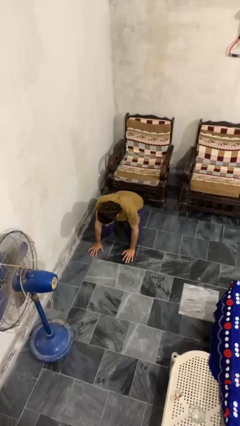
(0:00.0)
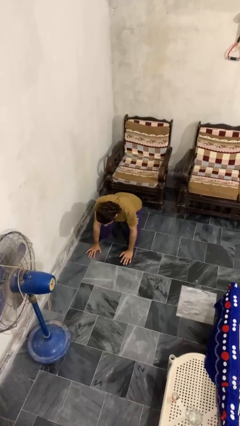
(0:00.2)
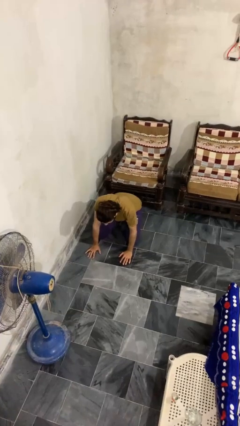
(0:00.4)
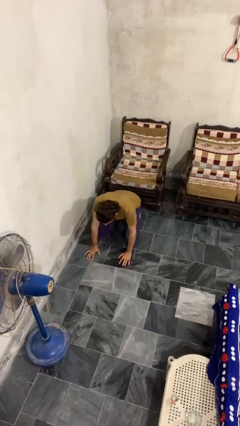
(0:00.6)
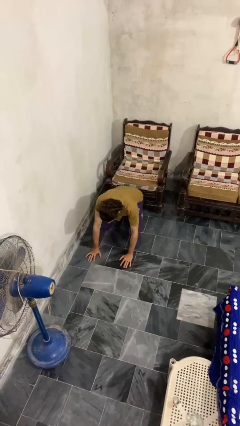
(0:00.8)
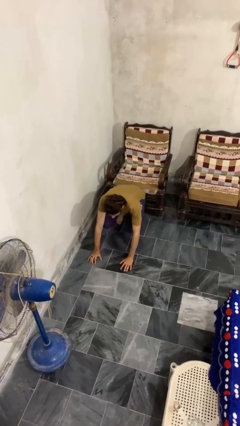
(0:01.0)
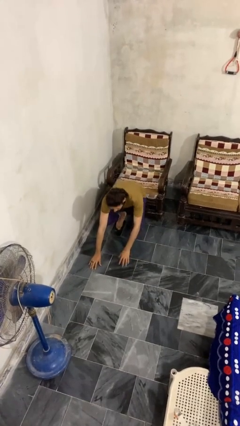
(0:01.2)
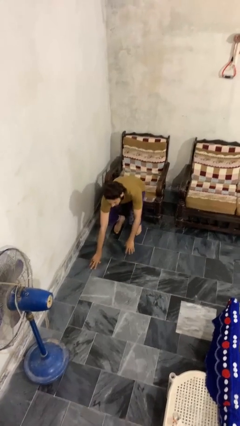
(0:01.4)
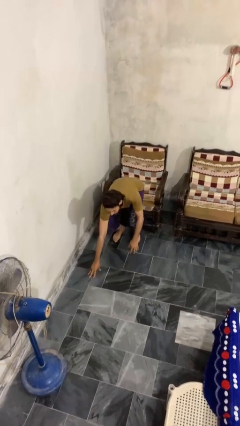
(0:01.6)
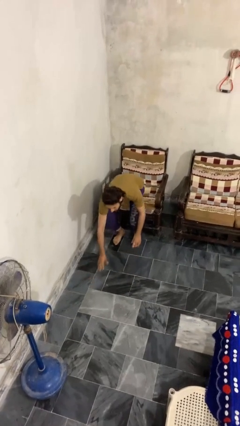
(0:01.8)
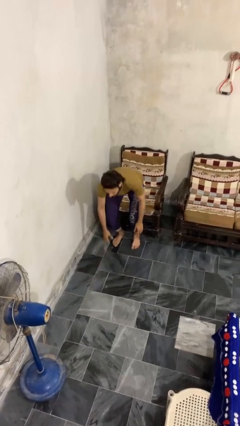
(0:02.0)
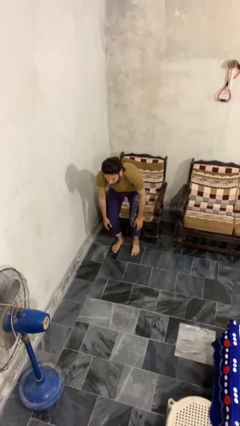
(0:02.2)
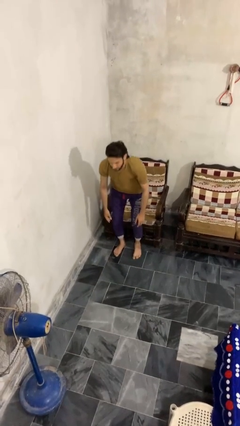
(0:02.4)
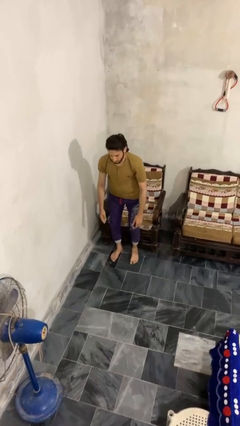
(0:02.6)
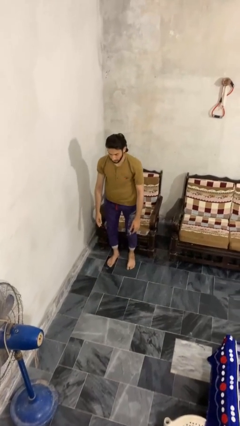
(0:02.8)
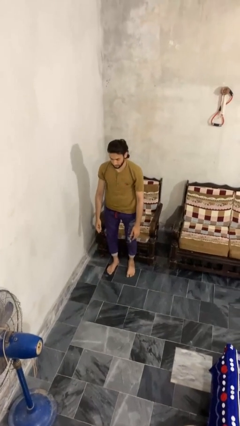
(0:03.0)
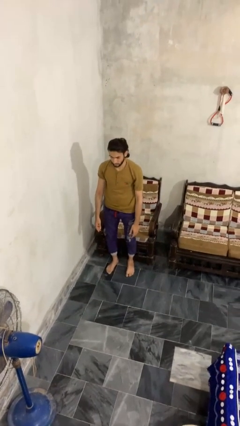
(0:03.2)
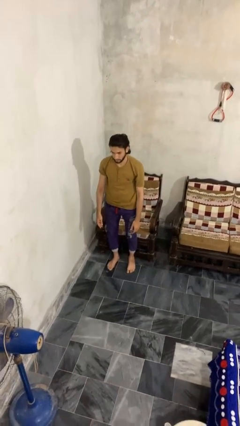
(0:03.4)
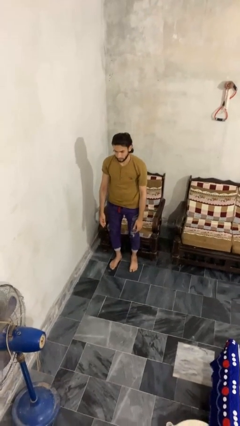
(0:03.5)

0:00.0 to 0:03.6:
person stands up from floor

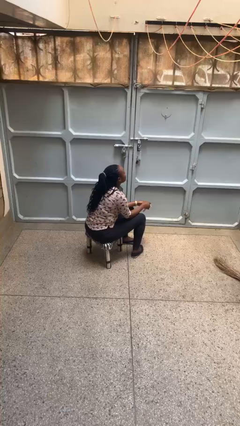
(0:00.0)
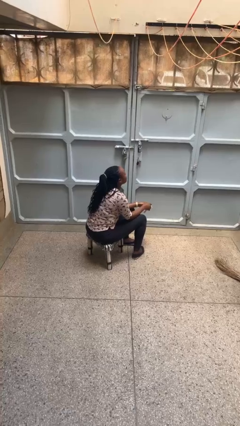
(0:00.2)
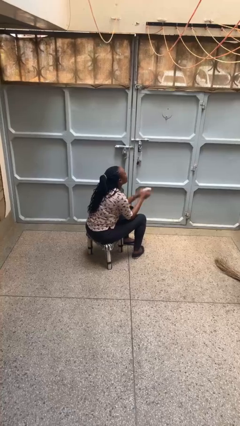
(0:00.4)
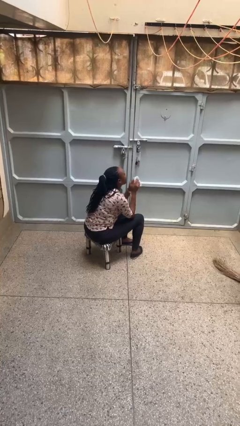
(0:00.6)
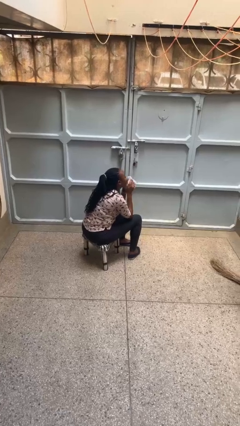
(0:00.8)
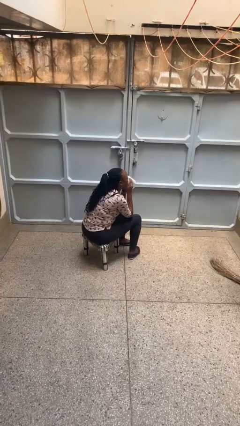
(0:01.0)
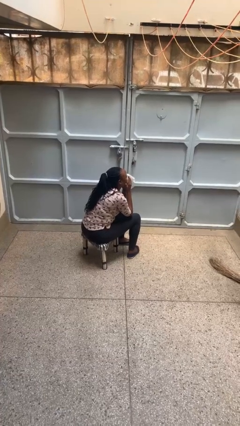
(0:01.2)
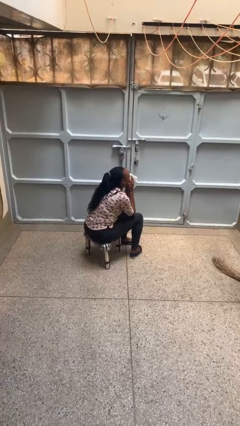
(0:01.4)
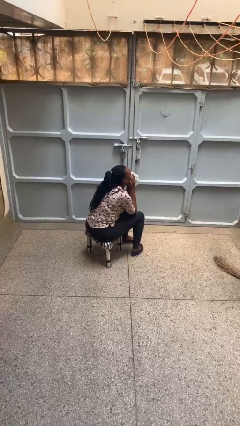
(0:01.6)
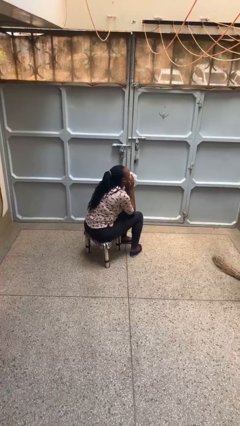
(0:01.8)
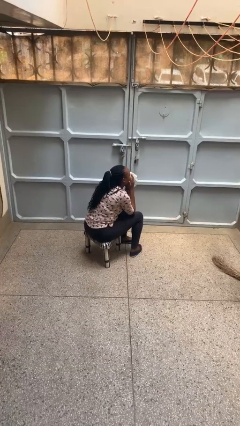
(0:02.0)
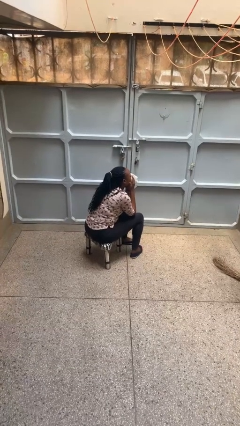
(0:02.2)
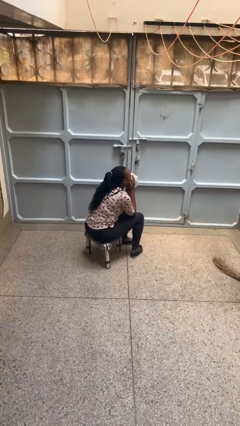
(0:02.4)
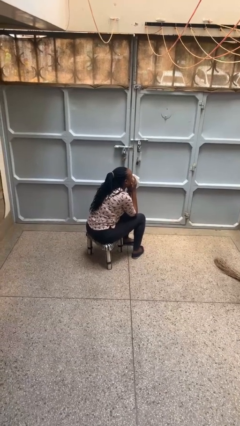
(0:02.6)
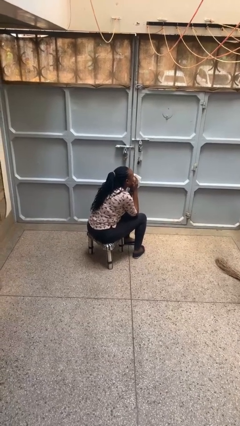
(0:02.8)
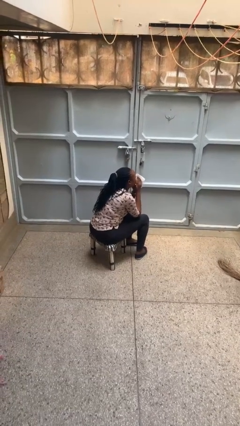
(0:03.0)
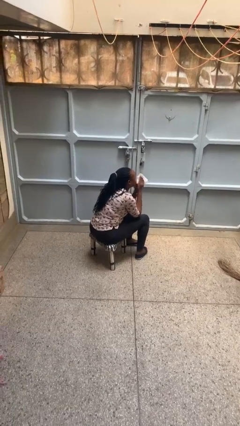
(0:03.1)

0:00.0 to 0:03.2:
person blows nose

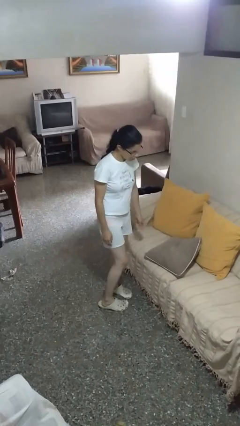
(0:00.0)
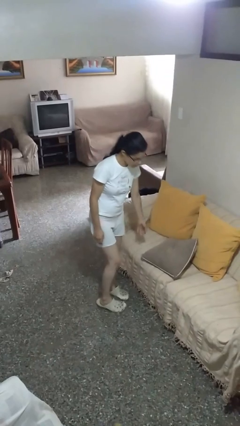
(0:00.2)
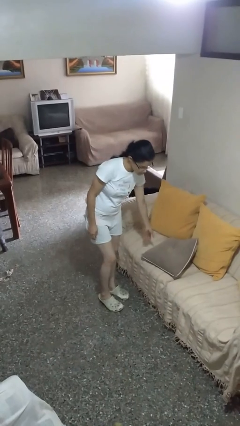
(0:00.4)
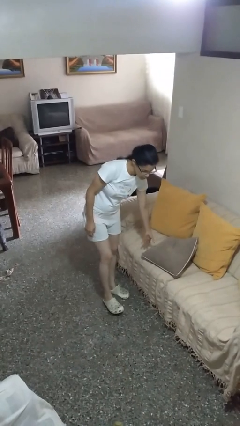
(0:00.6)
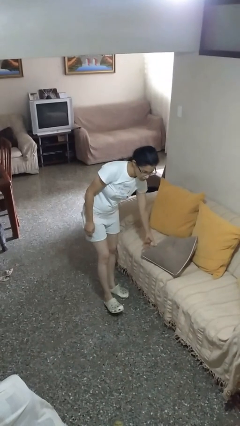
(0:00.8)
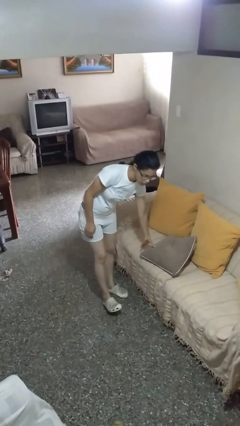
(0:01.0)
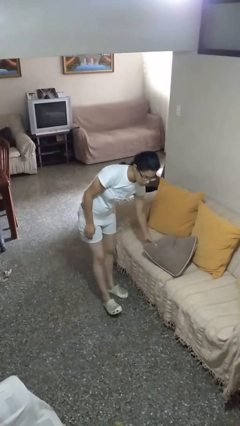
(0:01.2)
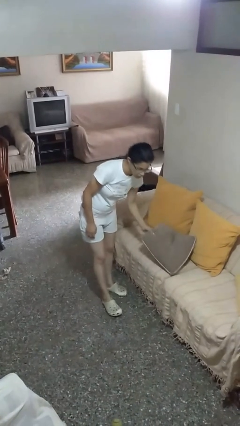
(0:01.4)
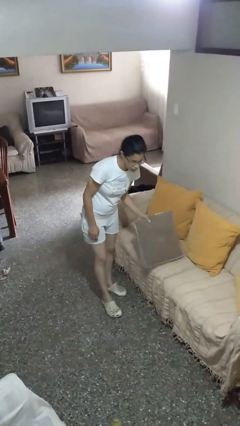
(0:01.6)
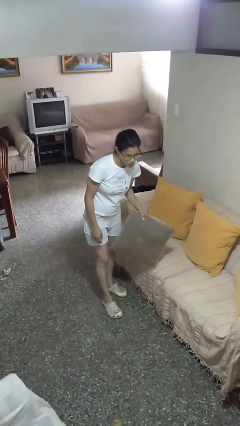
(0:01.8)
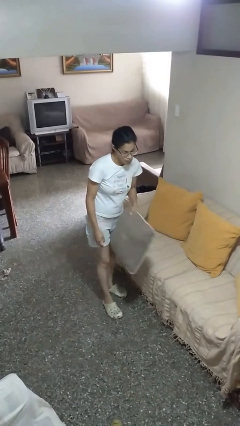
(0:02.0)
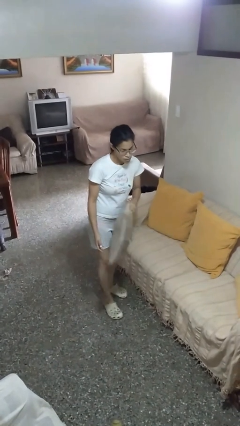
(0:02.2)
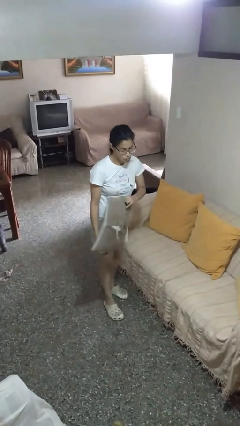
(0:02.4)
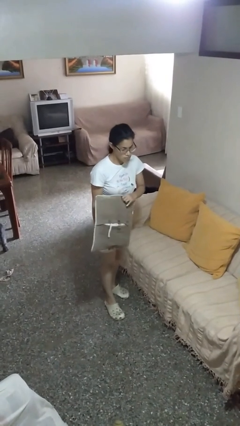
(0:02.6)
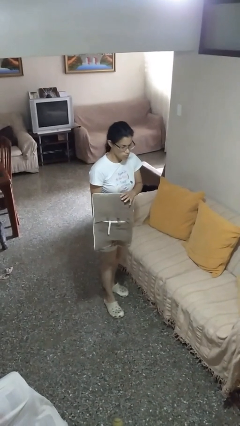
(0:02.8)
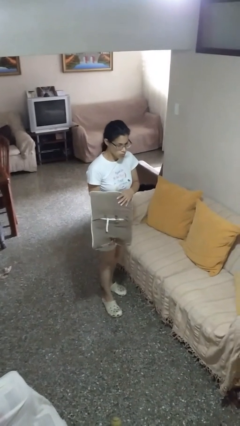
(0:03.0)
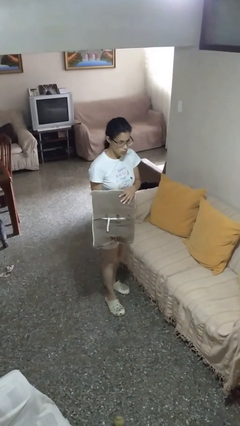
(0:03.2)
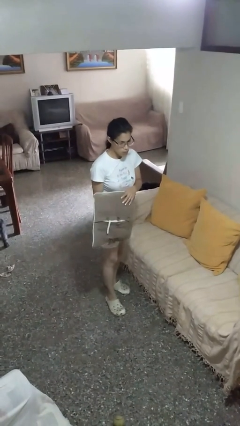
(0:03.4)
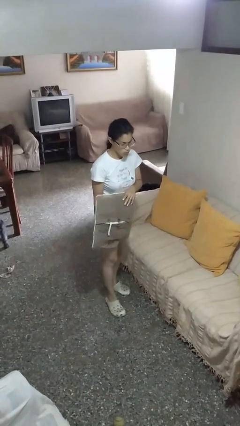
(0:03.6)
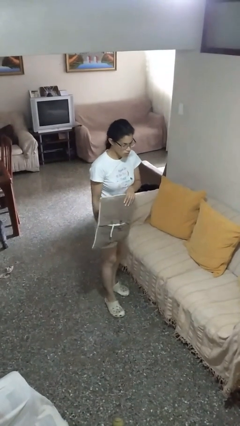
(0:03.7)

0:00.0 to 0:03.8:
person picks up object from couch

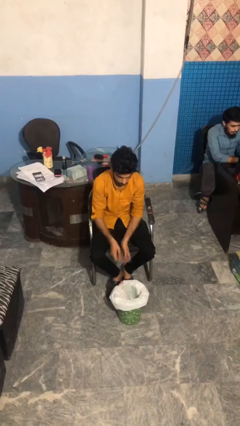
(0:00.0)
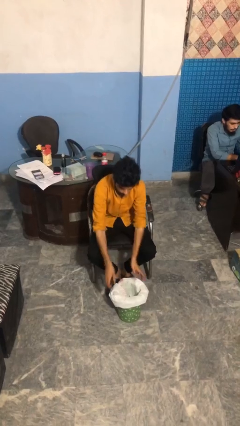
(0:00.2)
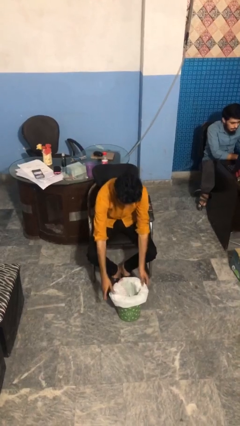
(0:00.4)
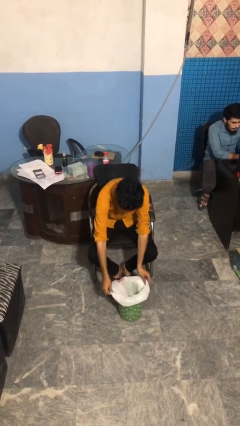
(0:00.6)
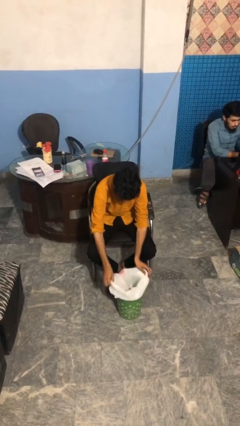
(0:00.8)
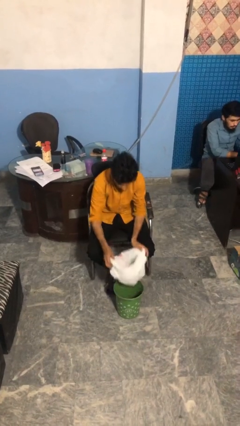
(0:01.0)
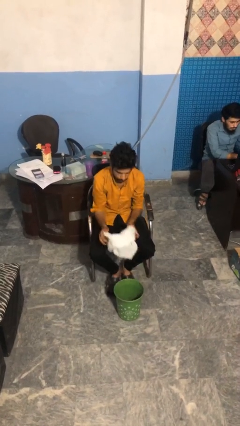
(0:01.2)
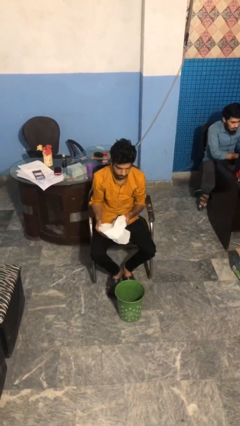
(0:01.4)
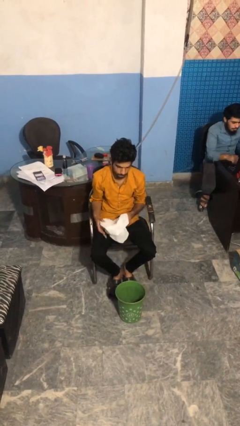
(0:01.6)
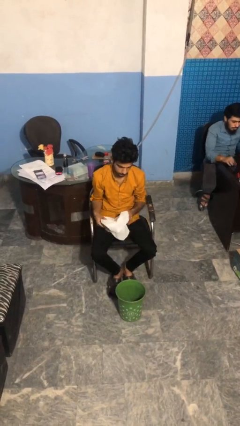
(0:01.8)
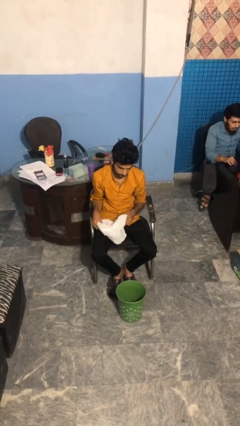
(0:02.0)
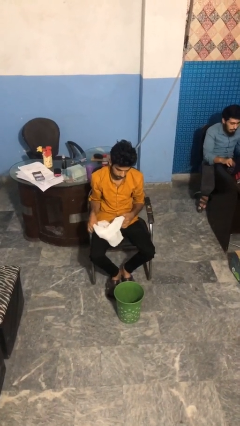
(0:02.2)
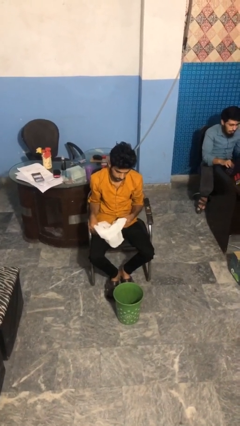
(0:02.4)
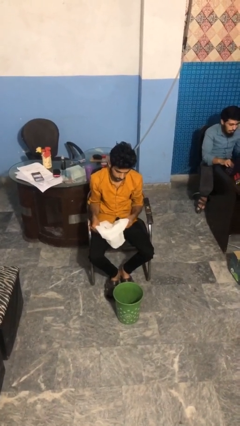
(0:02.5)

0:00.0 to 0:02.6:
person removes trashbag from trashcan

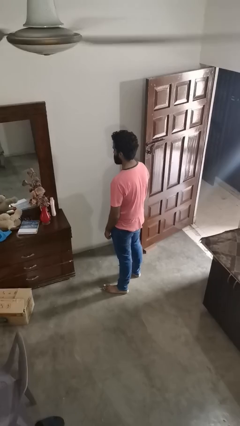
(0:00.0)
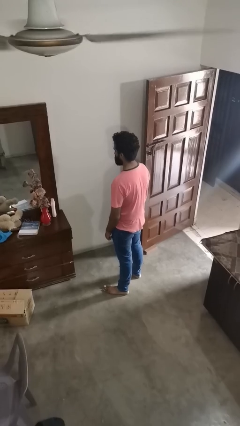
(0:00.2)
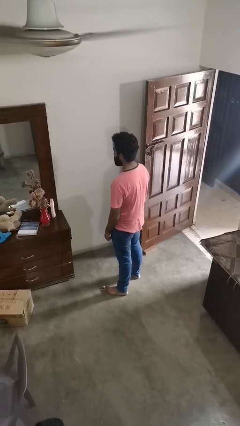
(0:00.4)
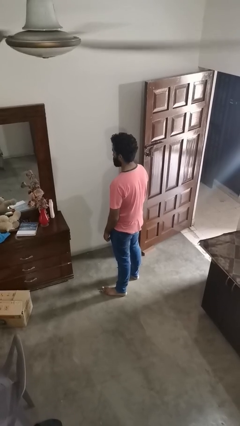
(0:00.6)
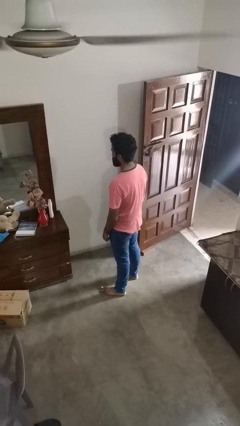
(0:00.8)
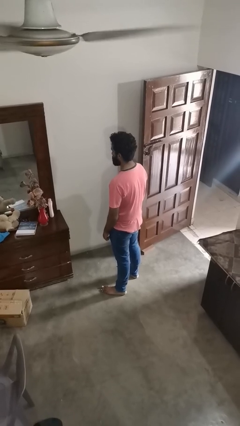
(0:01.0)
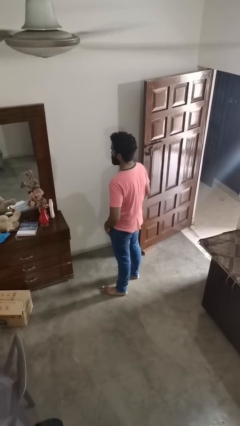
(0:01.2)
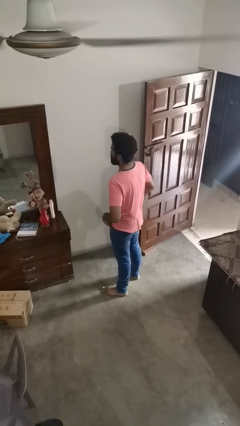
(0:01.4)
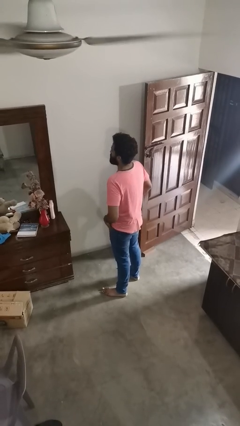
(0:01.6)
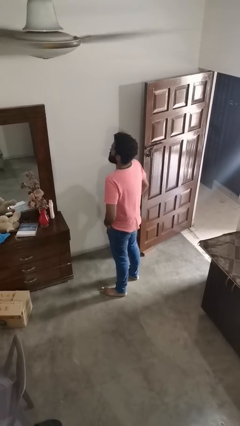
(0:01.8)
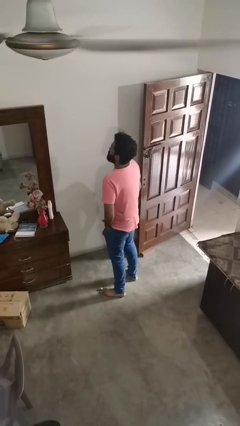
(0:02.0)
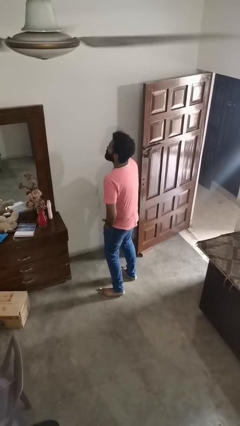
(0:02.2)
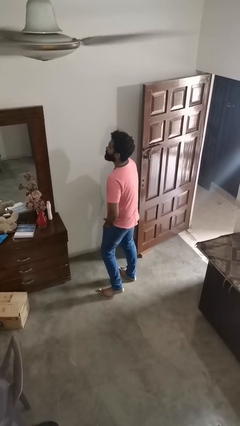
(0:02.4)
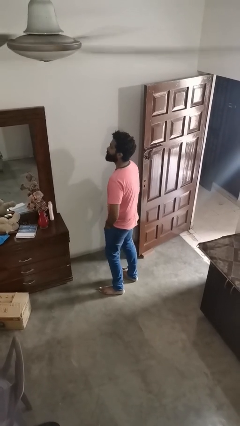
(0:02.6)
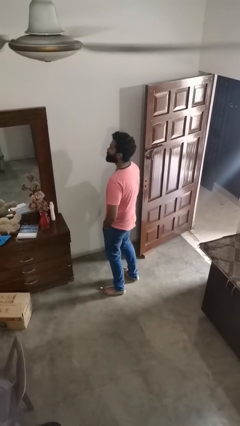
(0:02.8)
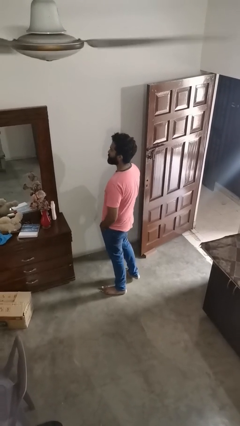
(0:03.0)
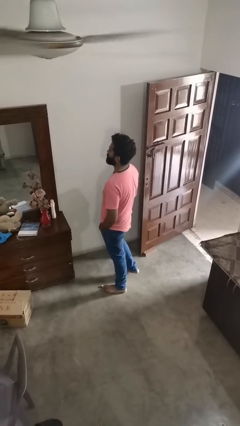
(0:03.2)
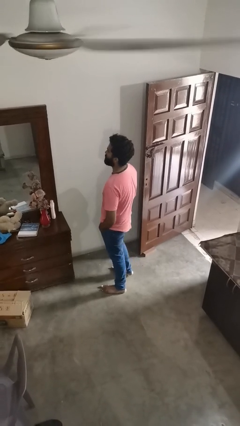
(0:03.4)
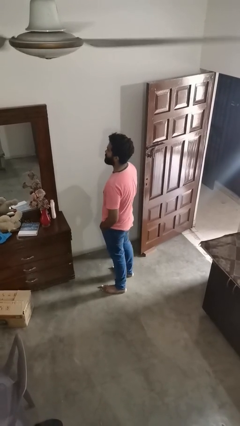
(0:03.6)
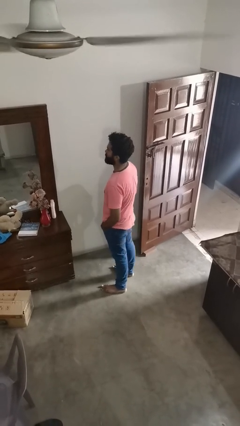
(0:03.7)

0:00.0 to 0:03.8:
person puts hands in back pockets

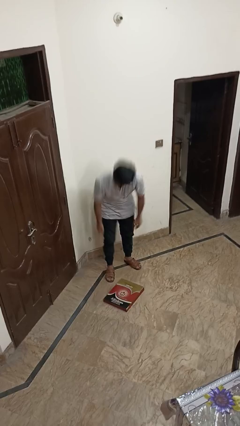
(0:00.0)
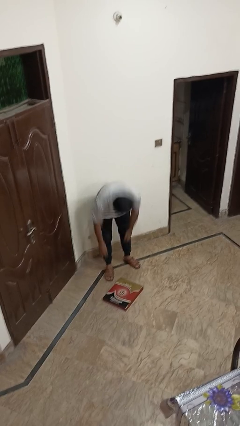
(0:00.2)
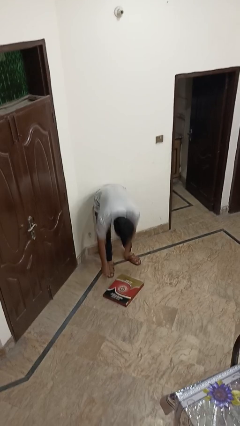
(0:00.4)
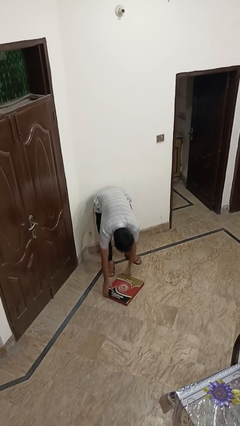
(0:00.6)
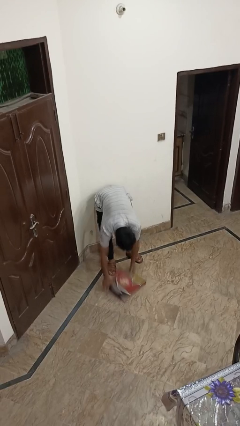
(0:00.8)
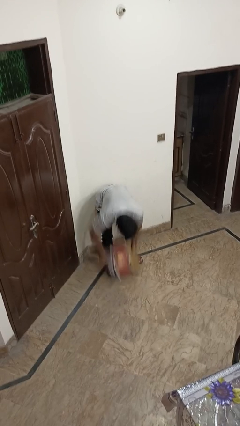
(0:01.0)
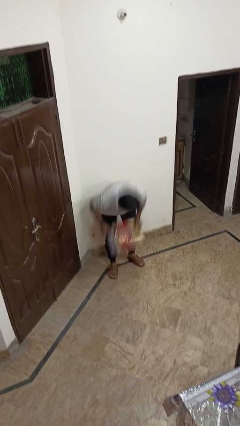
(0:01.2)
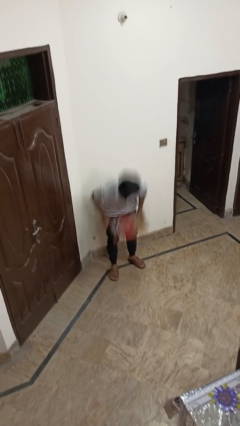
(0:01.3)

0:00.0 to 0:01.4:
person picks up object from floor
